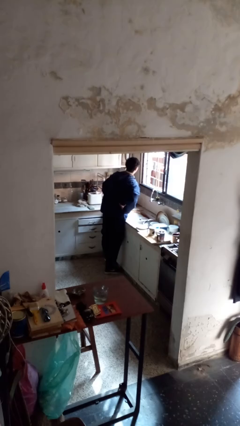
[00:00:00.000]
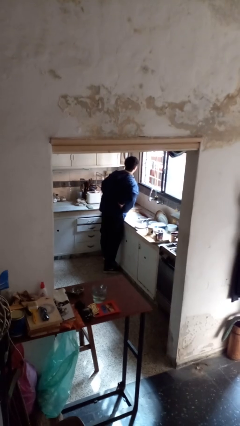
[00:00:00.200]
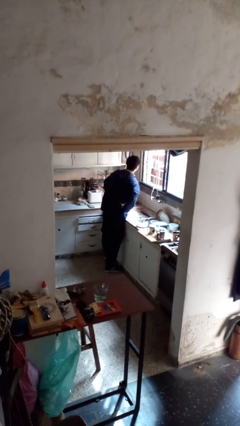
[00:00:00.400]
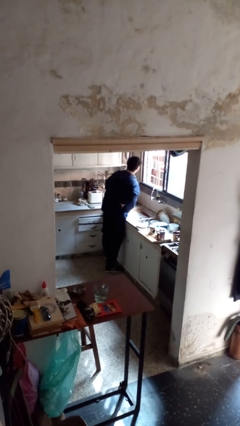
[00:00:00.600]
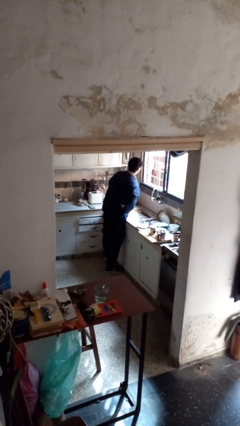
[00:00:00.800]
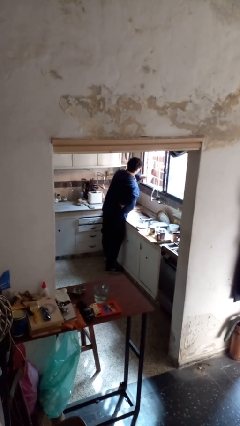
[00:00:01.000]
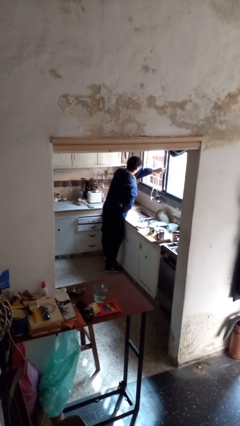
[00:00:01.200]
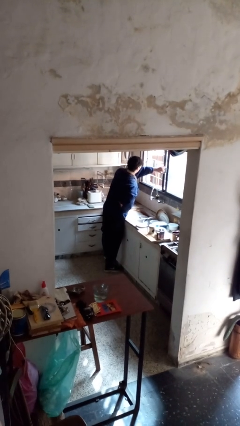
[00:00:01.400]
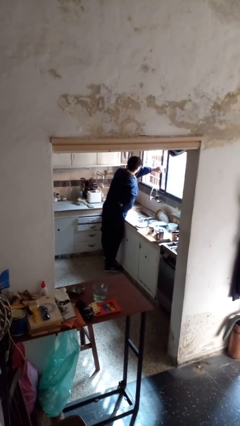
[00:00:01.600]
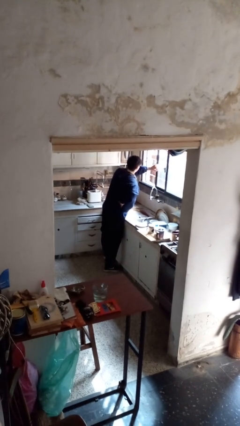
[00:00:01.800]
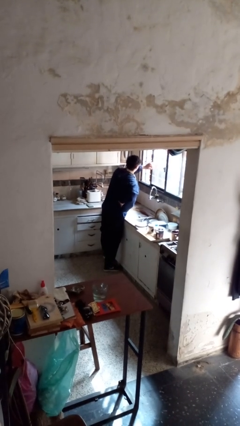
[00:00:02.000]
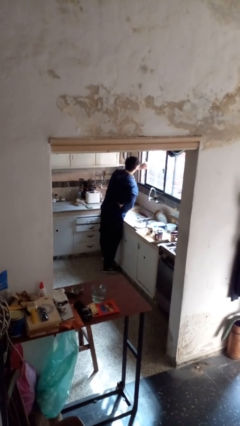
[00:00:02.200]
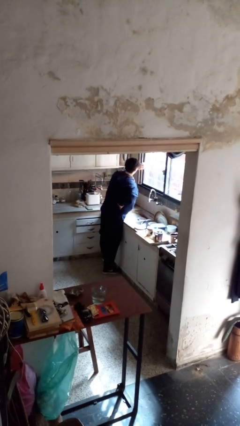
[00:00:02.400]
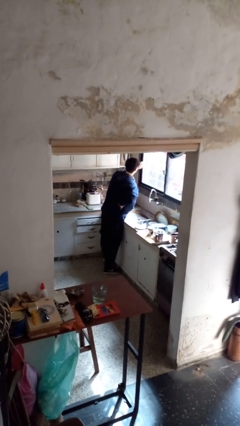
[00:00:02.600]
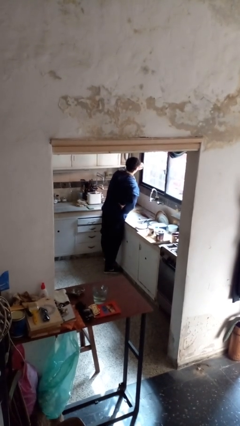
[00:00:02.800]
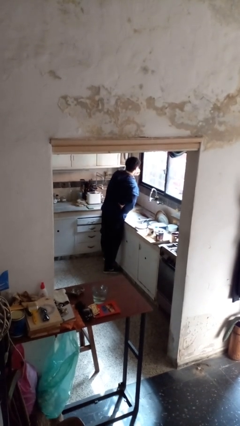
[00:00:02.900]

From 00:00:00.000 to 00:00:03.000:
person closes home window

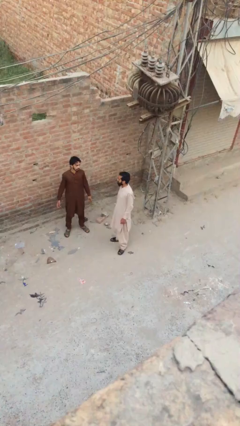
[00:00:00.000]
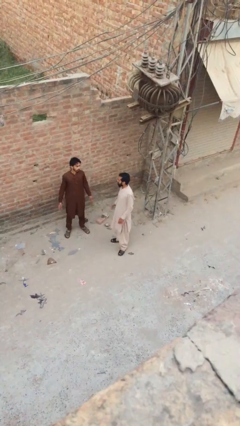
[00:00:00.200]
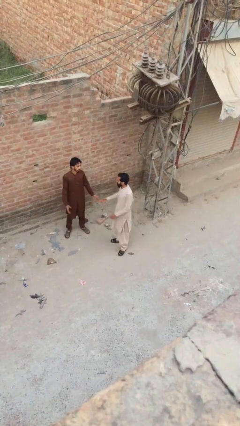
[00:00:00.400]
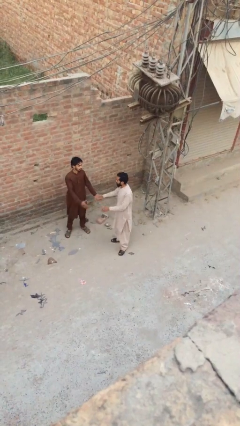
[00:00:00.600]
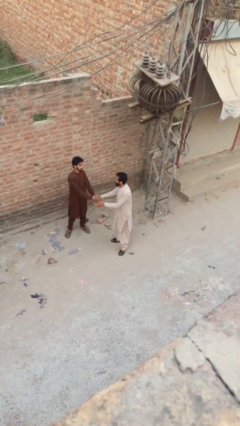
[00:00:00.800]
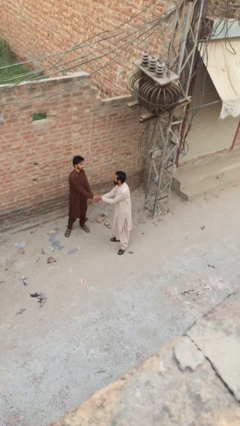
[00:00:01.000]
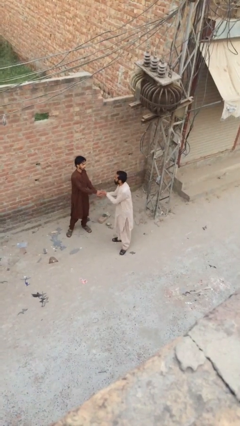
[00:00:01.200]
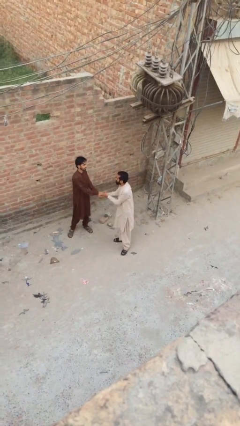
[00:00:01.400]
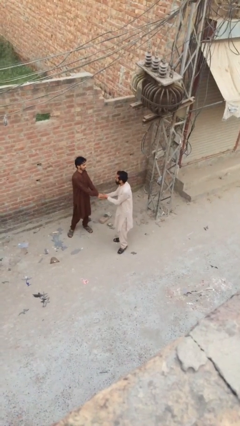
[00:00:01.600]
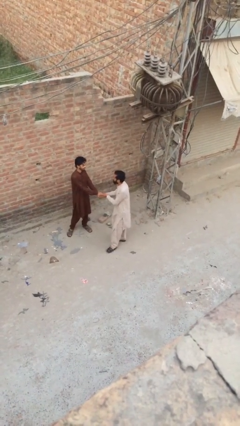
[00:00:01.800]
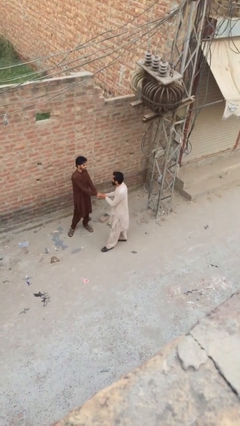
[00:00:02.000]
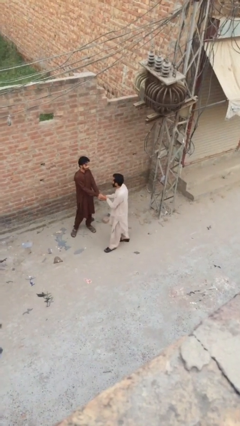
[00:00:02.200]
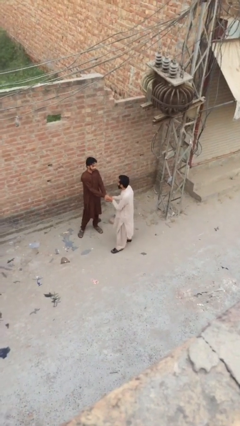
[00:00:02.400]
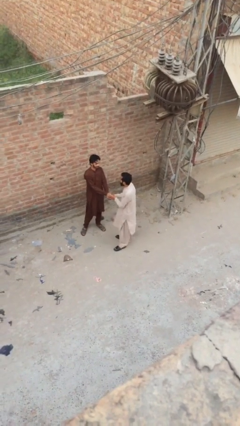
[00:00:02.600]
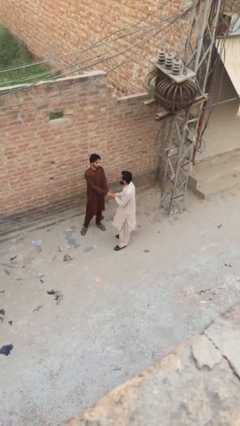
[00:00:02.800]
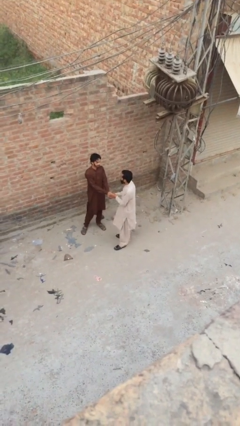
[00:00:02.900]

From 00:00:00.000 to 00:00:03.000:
person shakes hand

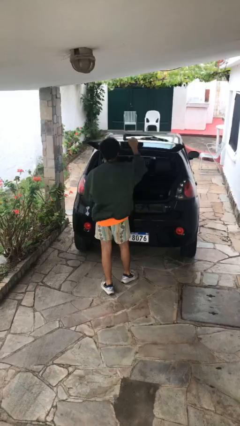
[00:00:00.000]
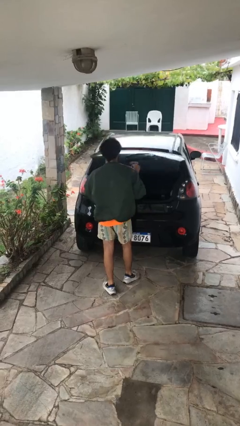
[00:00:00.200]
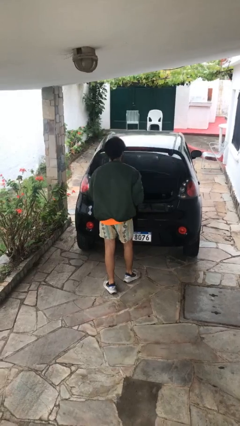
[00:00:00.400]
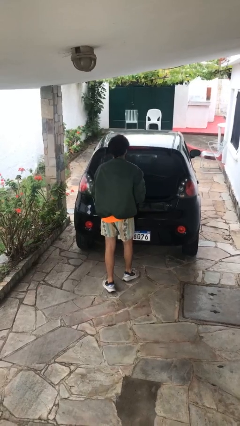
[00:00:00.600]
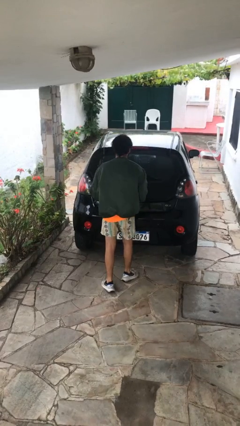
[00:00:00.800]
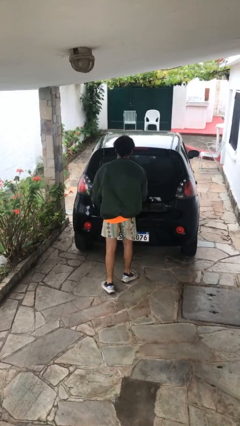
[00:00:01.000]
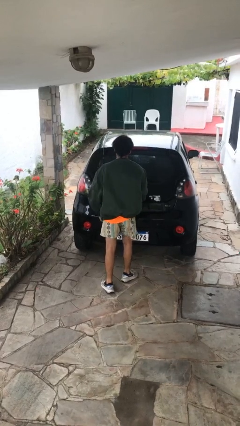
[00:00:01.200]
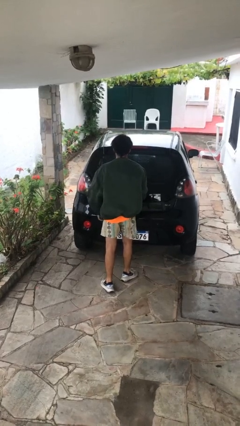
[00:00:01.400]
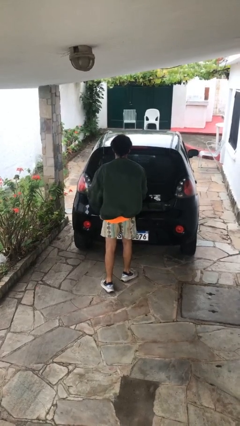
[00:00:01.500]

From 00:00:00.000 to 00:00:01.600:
person closes car trunk

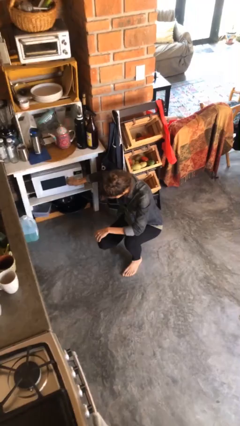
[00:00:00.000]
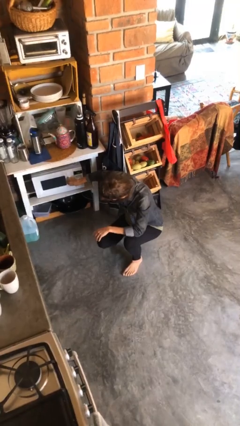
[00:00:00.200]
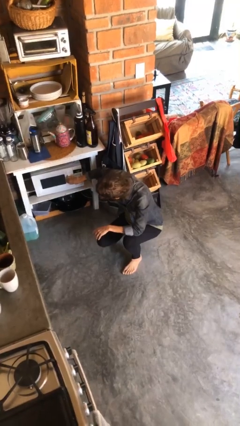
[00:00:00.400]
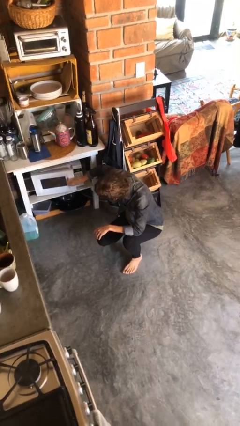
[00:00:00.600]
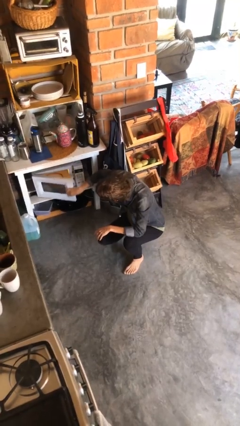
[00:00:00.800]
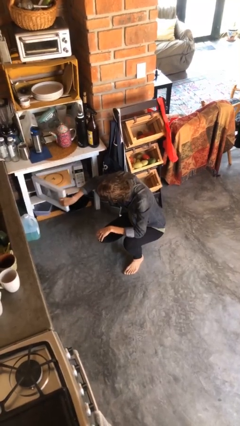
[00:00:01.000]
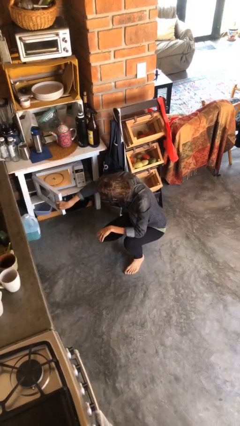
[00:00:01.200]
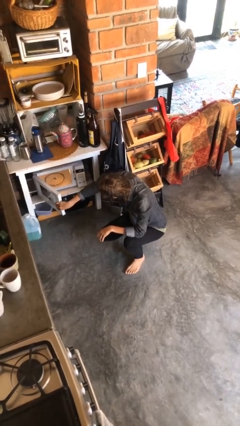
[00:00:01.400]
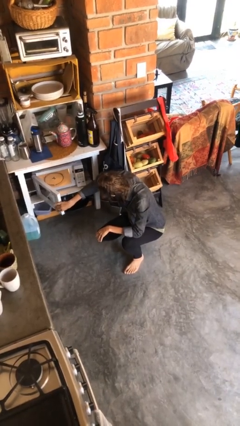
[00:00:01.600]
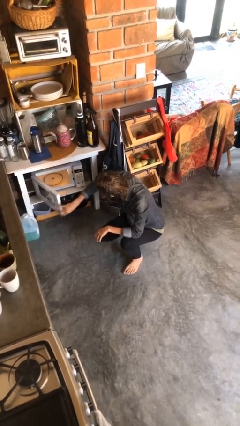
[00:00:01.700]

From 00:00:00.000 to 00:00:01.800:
person opens microwave

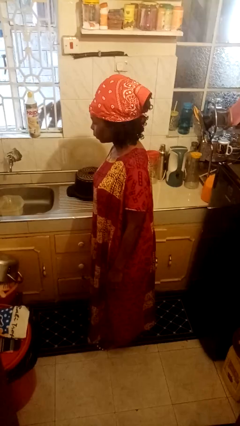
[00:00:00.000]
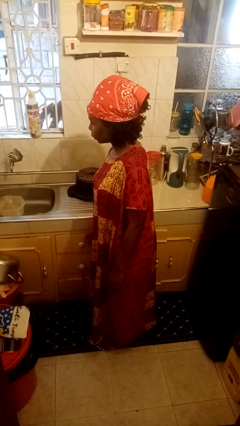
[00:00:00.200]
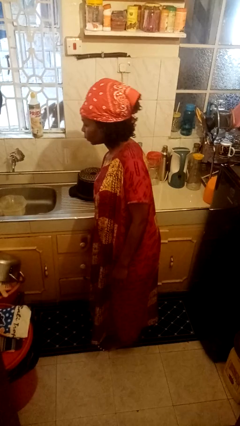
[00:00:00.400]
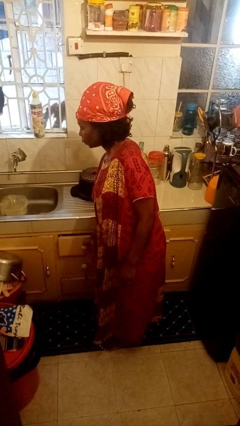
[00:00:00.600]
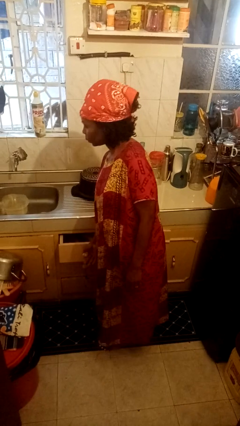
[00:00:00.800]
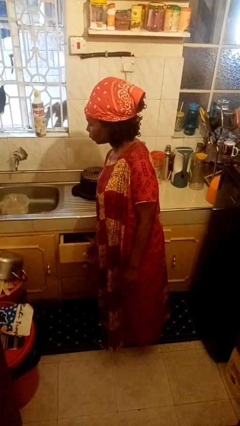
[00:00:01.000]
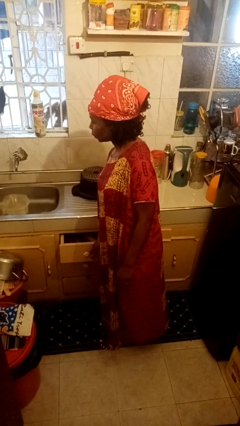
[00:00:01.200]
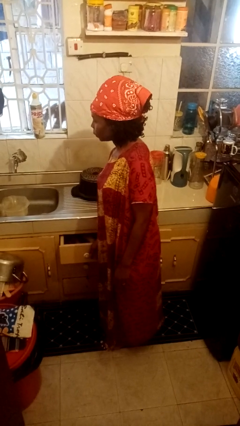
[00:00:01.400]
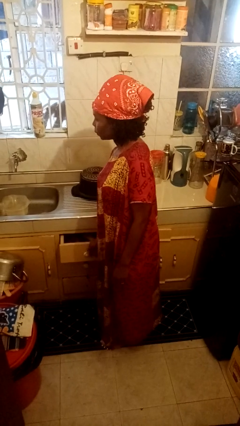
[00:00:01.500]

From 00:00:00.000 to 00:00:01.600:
person opens kitchen drawer

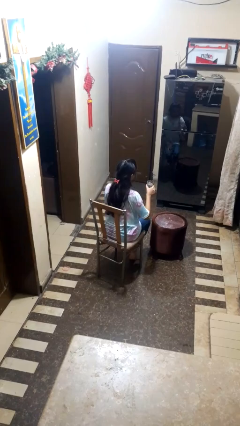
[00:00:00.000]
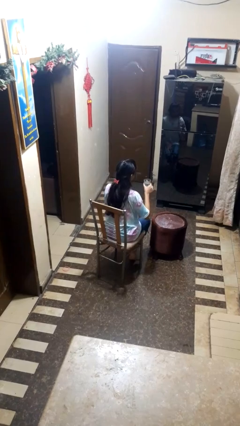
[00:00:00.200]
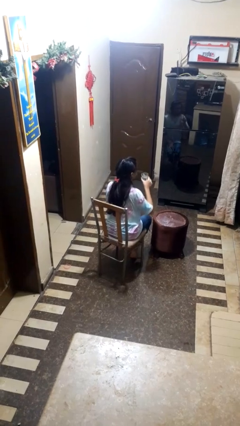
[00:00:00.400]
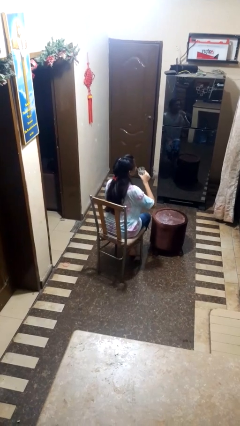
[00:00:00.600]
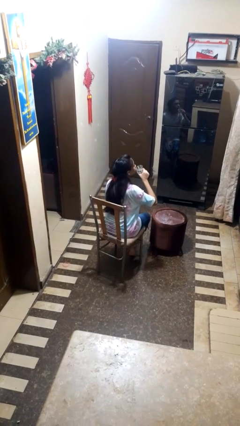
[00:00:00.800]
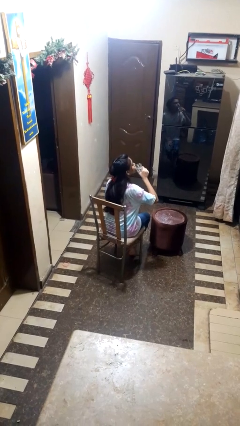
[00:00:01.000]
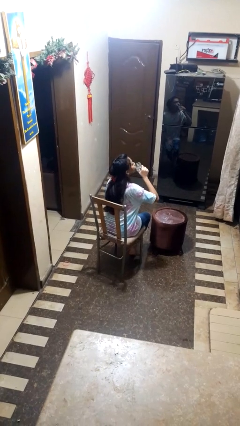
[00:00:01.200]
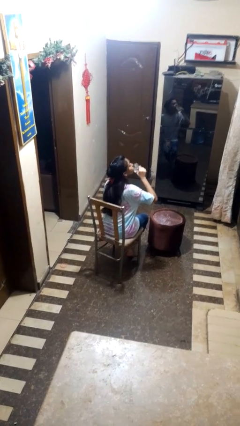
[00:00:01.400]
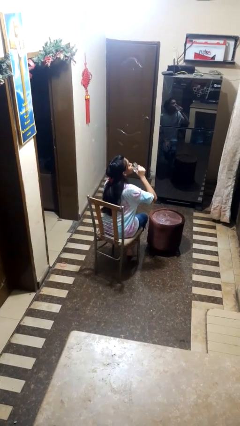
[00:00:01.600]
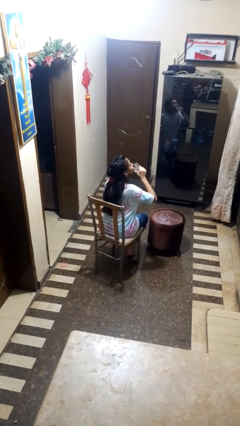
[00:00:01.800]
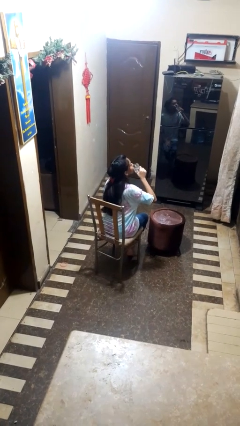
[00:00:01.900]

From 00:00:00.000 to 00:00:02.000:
person drinks from shotglass

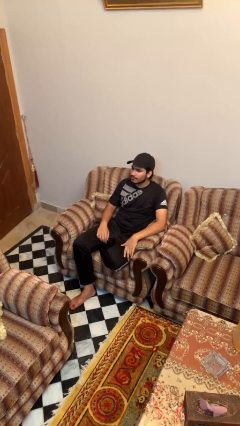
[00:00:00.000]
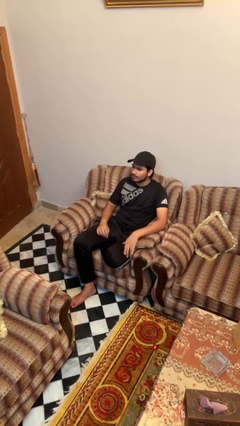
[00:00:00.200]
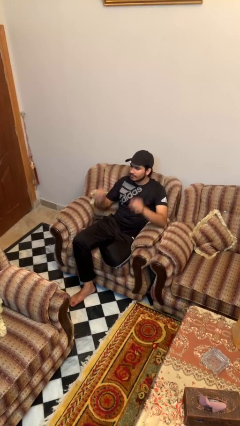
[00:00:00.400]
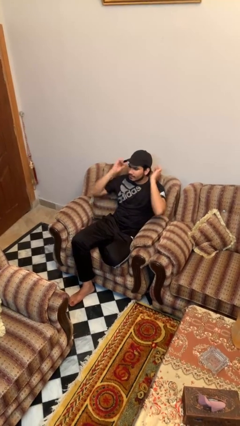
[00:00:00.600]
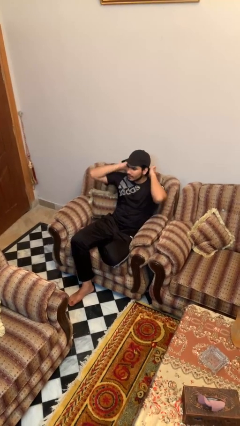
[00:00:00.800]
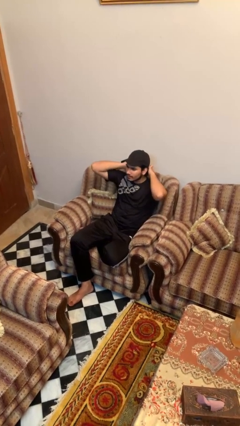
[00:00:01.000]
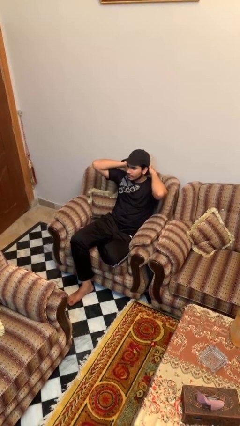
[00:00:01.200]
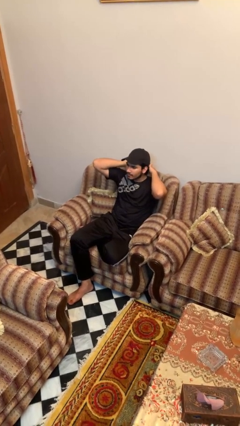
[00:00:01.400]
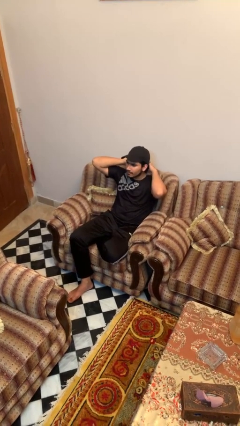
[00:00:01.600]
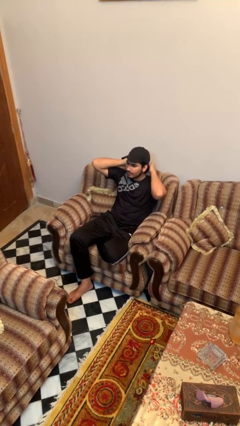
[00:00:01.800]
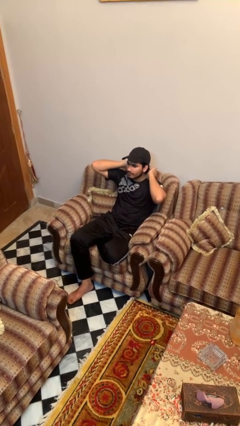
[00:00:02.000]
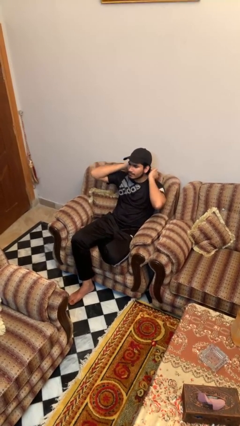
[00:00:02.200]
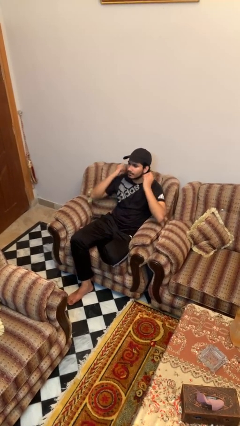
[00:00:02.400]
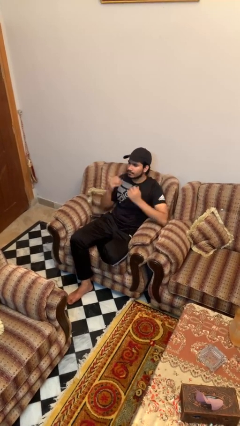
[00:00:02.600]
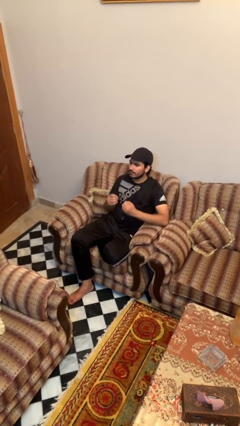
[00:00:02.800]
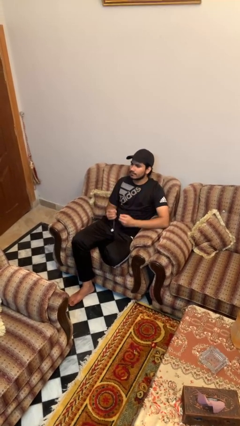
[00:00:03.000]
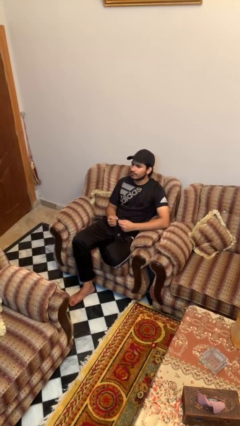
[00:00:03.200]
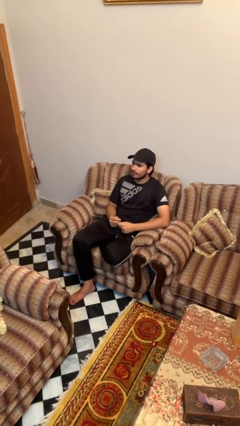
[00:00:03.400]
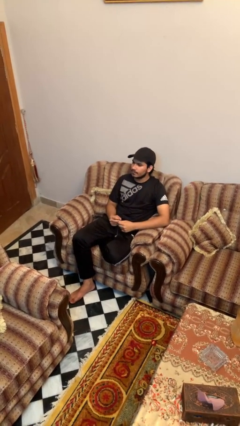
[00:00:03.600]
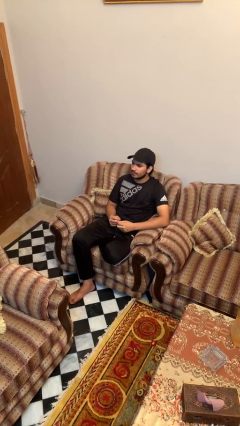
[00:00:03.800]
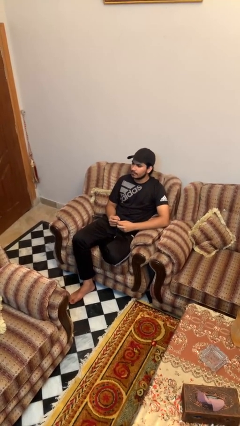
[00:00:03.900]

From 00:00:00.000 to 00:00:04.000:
person takes off necklace
